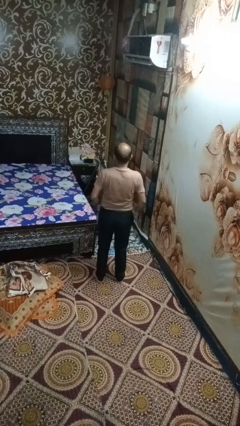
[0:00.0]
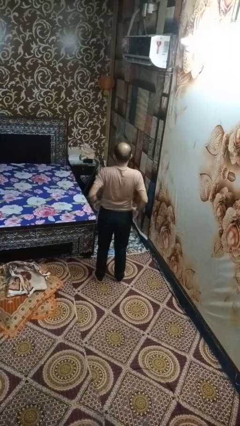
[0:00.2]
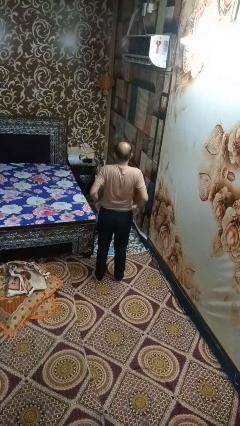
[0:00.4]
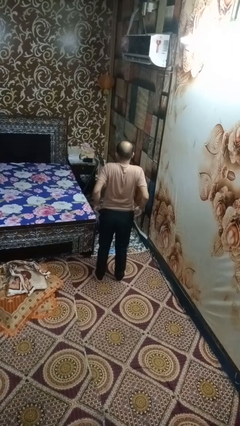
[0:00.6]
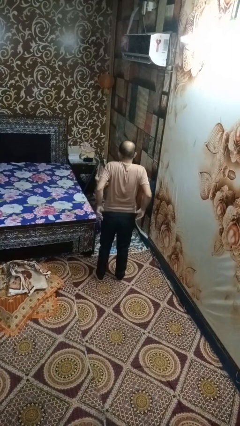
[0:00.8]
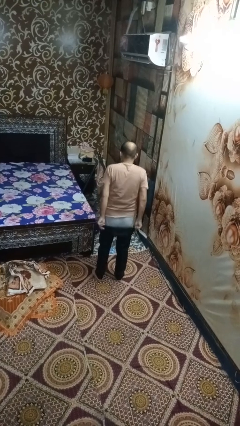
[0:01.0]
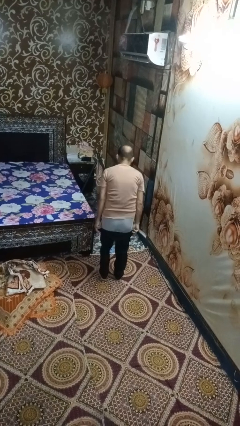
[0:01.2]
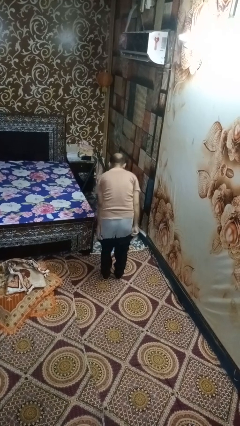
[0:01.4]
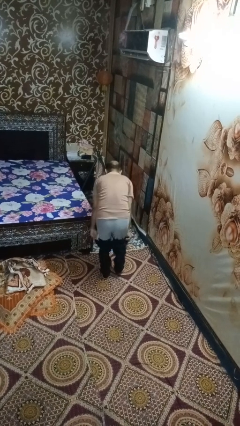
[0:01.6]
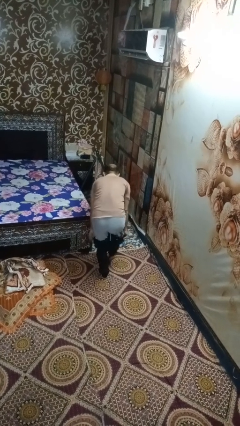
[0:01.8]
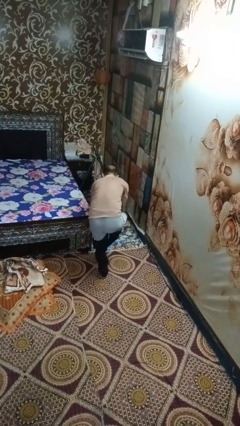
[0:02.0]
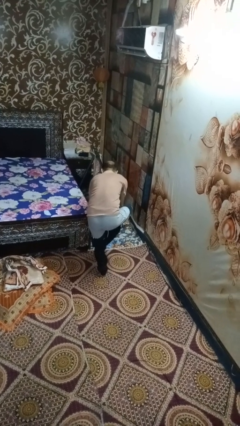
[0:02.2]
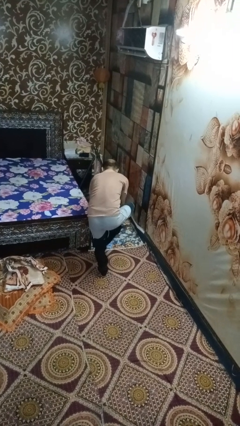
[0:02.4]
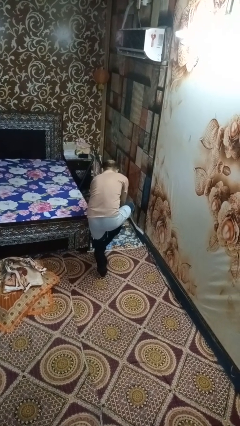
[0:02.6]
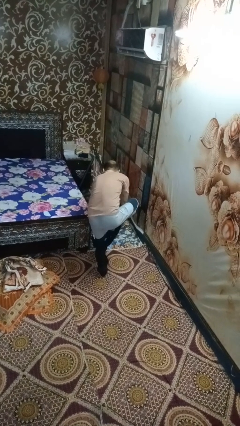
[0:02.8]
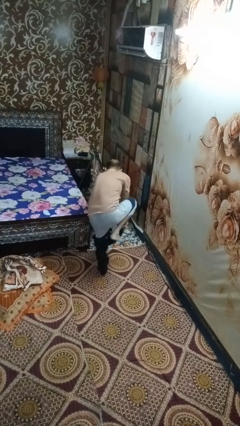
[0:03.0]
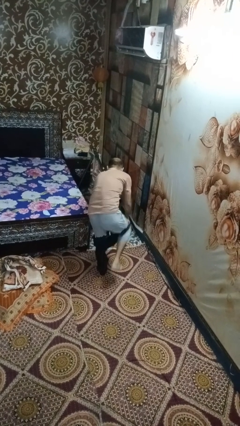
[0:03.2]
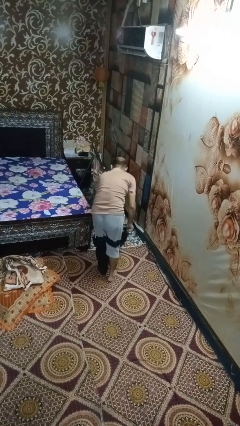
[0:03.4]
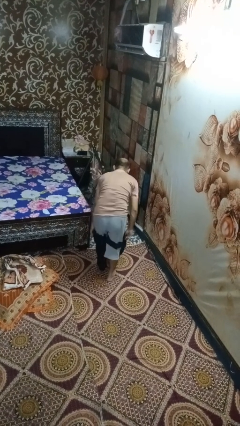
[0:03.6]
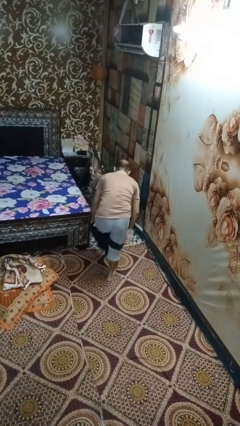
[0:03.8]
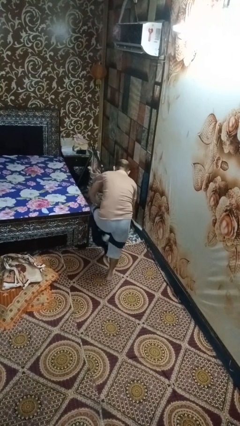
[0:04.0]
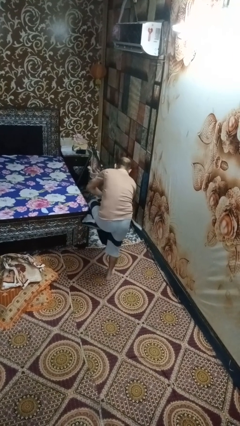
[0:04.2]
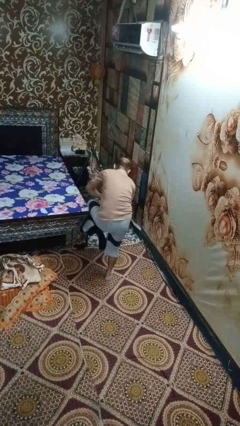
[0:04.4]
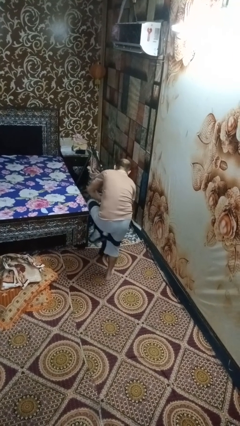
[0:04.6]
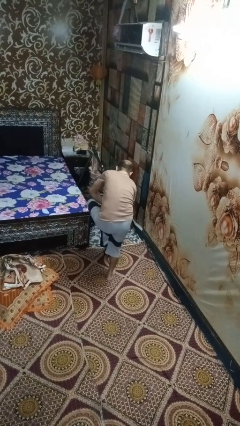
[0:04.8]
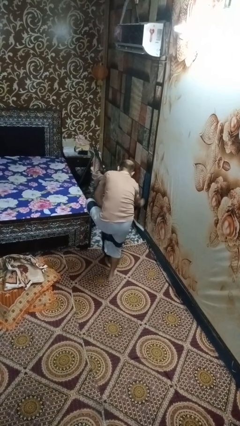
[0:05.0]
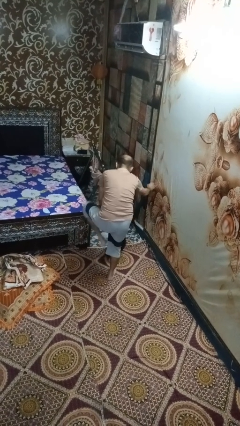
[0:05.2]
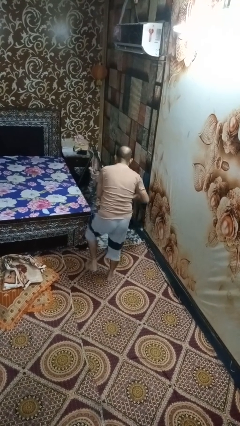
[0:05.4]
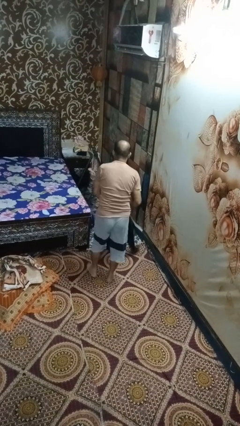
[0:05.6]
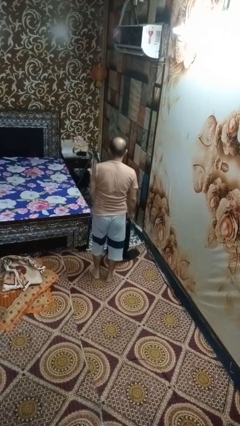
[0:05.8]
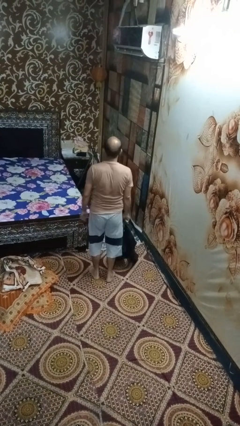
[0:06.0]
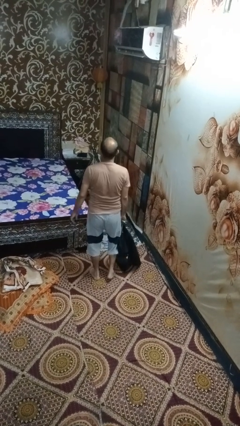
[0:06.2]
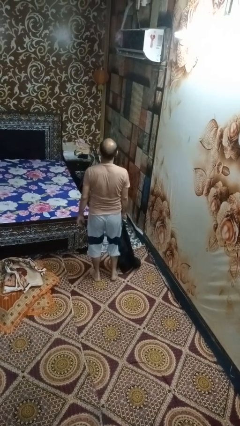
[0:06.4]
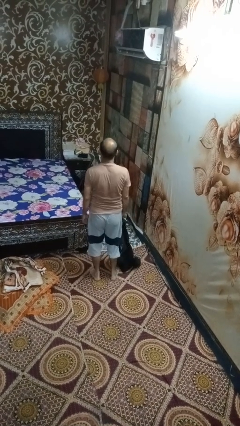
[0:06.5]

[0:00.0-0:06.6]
person takes off pants

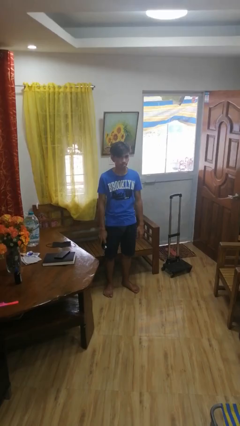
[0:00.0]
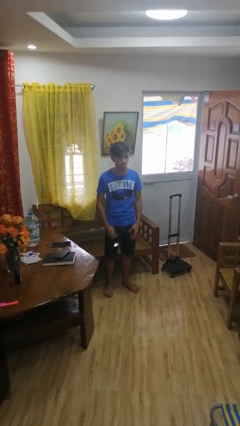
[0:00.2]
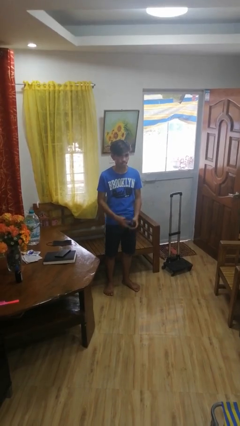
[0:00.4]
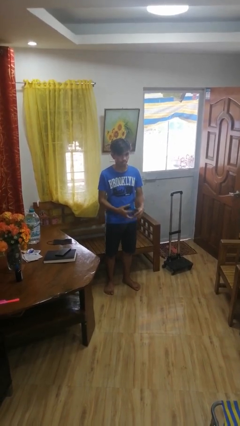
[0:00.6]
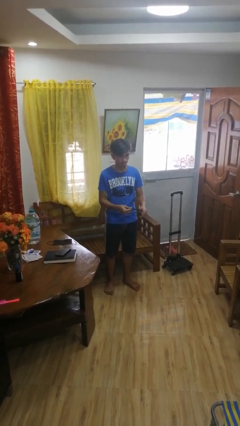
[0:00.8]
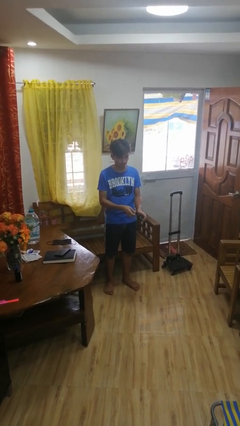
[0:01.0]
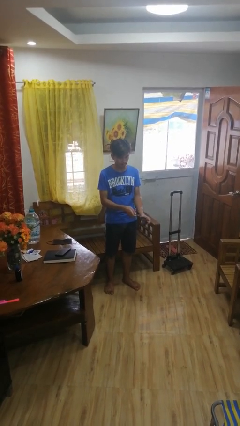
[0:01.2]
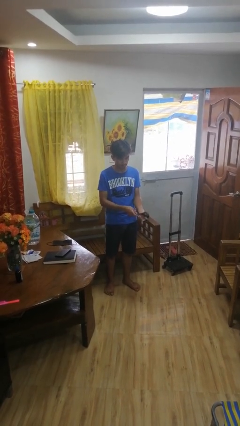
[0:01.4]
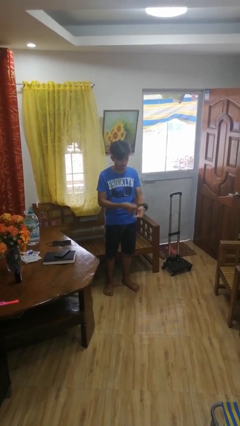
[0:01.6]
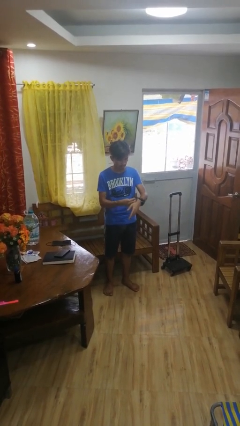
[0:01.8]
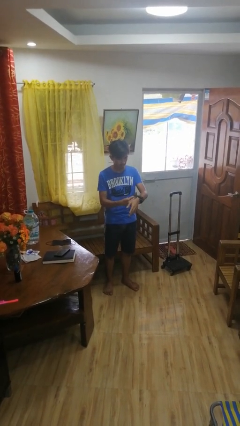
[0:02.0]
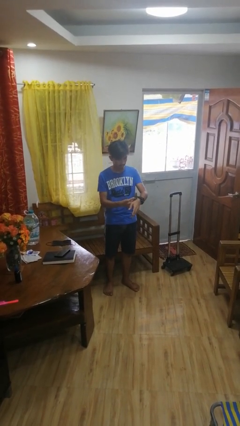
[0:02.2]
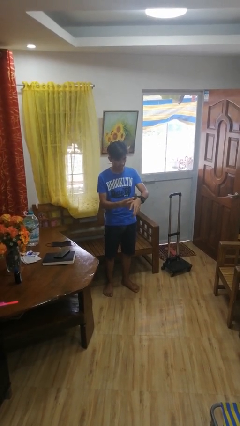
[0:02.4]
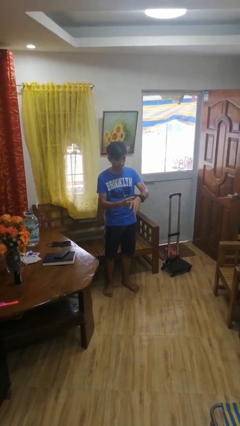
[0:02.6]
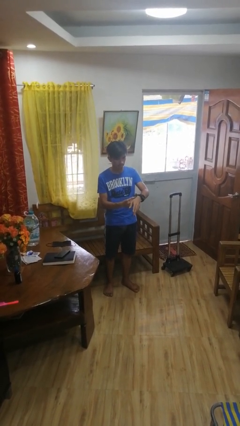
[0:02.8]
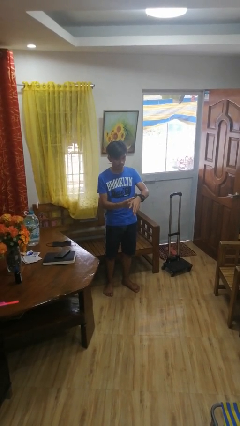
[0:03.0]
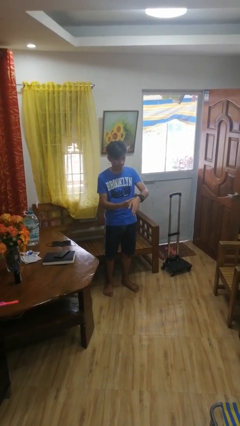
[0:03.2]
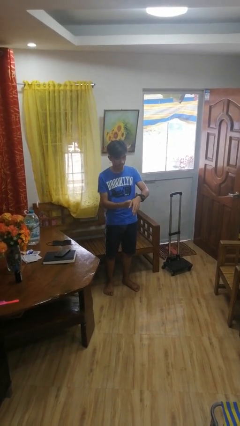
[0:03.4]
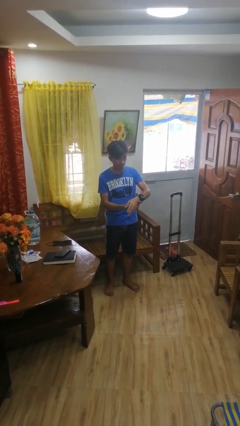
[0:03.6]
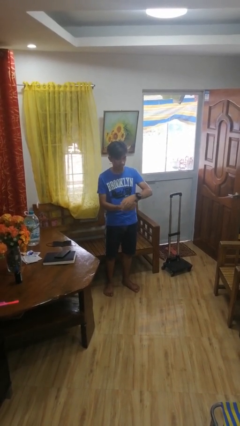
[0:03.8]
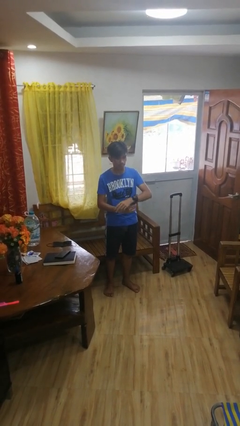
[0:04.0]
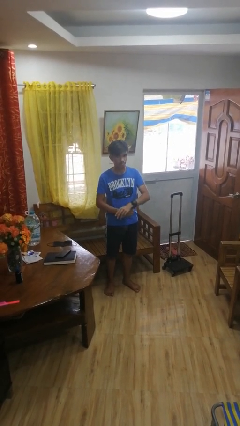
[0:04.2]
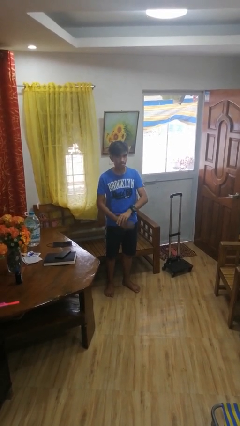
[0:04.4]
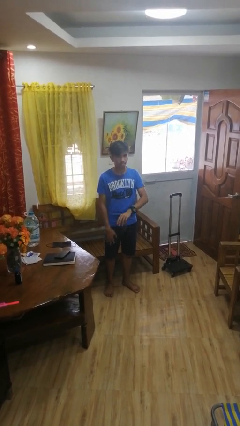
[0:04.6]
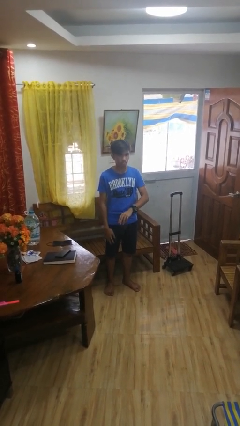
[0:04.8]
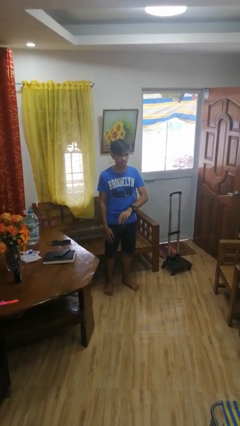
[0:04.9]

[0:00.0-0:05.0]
person puts on wristwatch

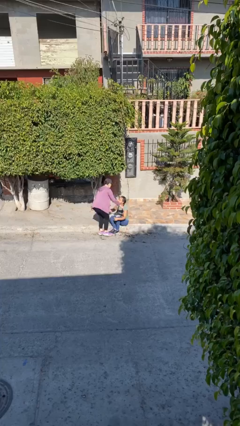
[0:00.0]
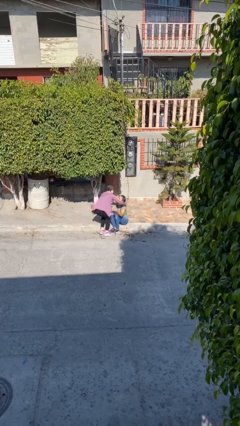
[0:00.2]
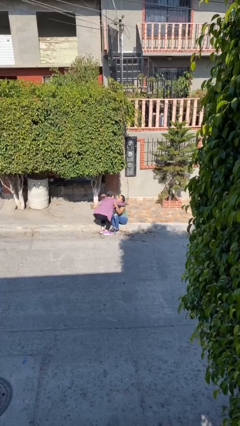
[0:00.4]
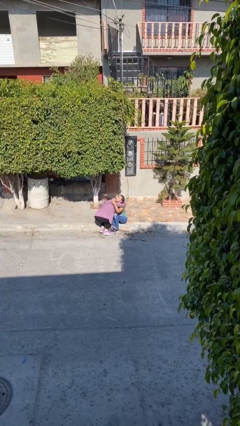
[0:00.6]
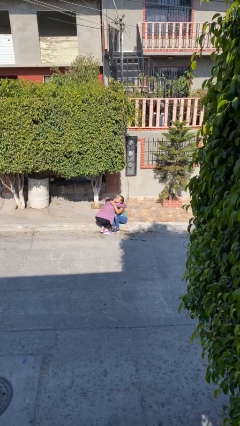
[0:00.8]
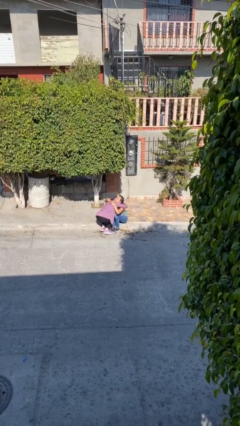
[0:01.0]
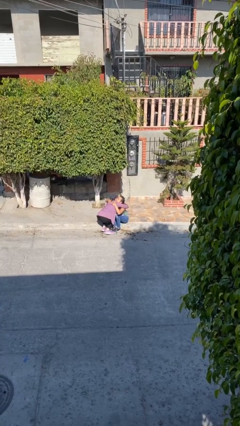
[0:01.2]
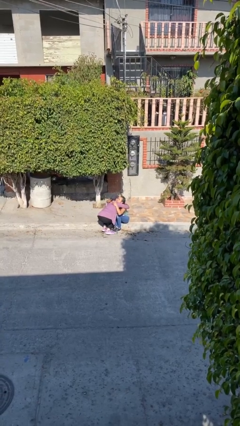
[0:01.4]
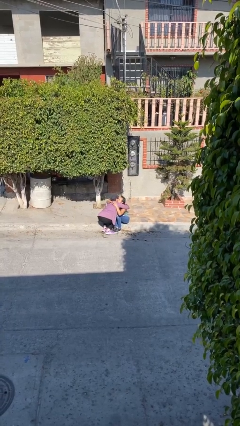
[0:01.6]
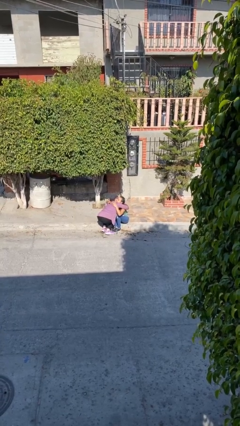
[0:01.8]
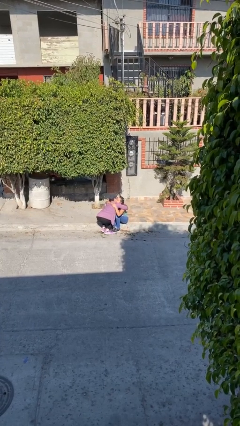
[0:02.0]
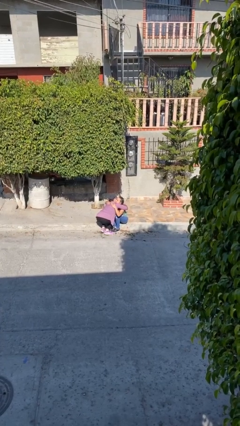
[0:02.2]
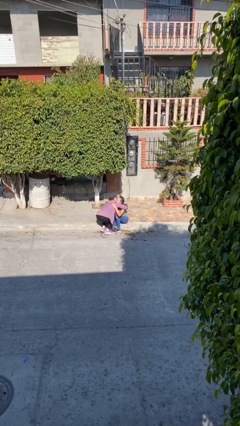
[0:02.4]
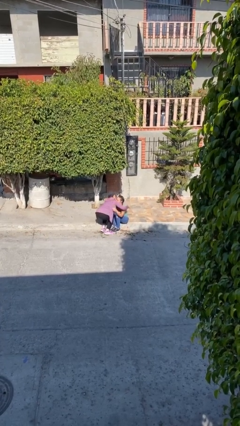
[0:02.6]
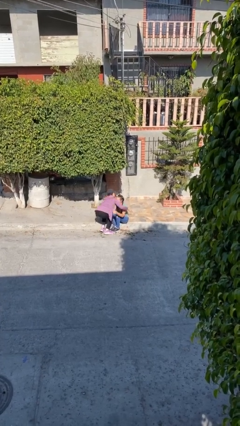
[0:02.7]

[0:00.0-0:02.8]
person embraces person

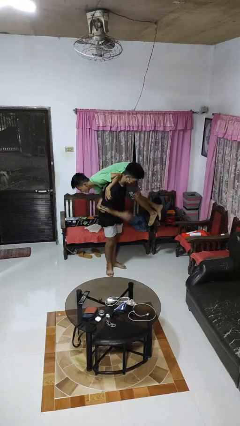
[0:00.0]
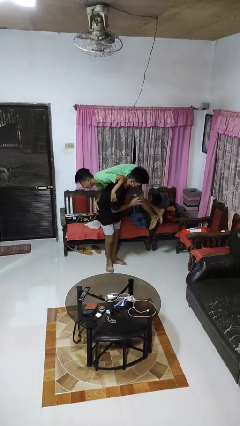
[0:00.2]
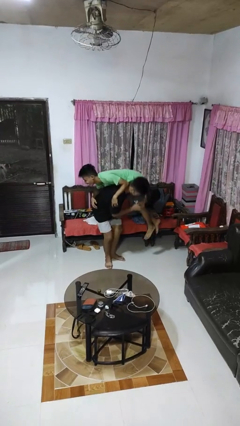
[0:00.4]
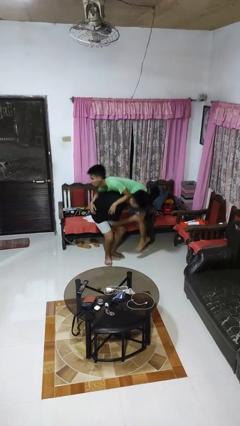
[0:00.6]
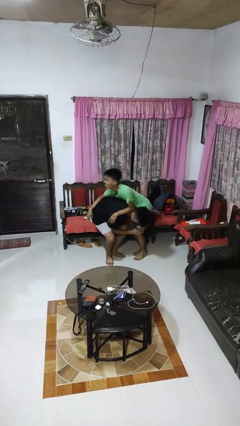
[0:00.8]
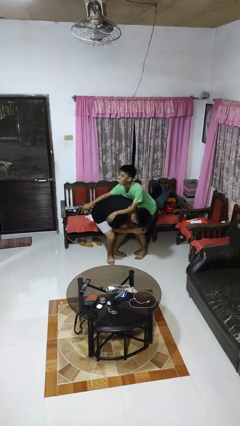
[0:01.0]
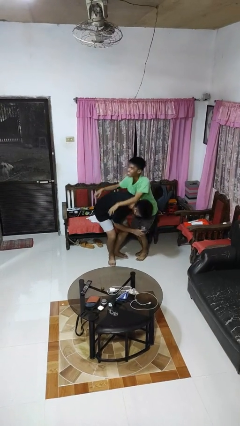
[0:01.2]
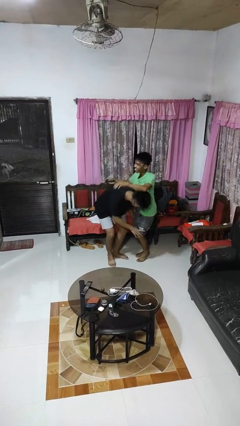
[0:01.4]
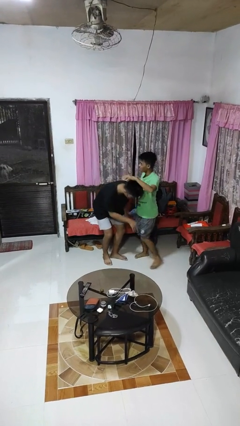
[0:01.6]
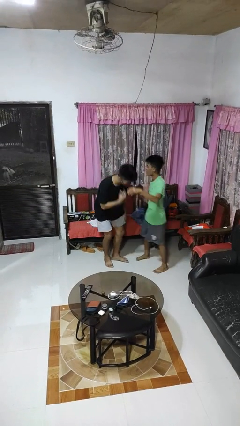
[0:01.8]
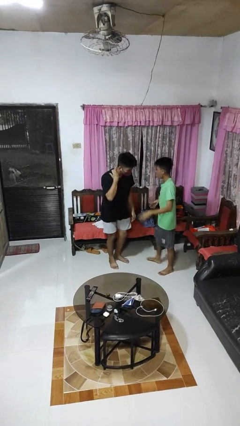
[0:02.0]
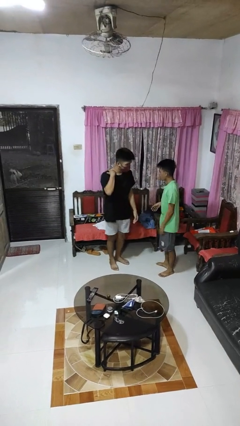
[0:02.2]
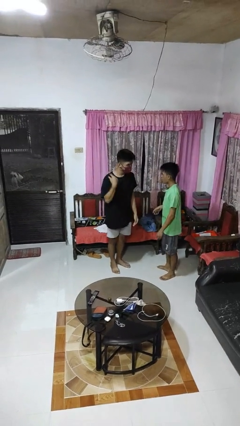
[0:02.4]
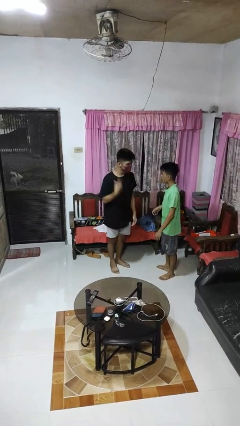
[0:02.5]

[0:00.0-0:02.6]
person puts down person

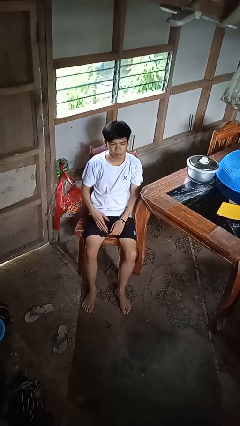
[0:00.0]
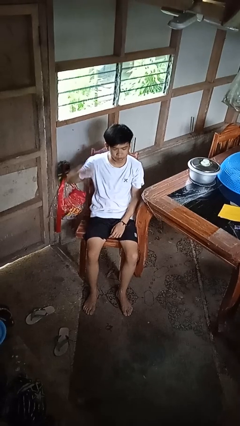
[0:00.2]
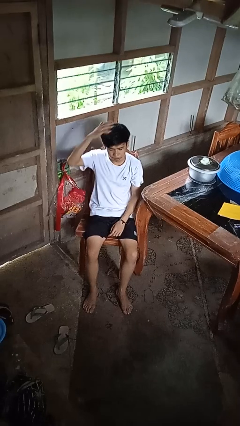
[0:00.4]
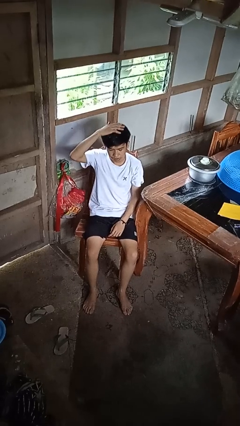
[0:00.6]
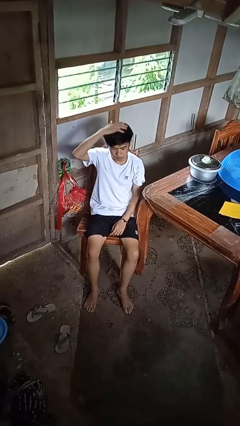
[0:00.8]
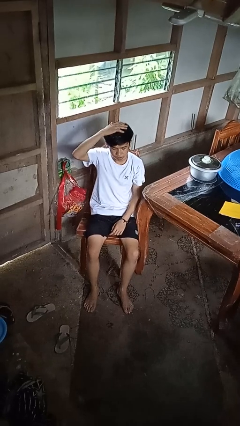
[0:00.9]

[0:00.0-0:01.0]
person pats head
